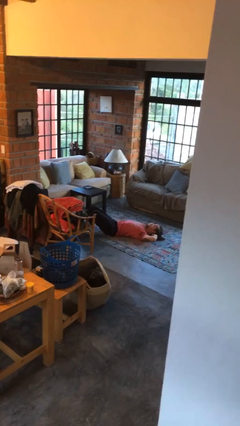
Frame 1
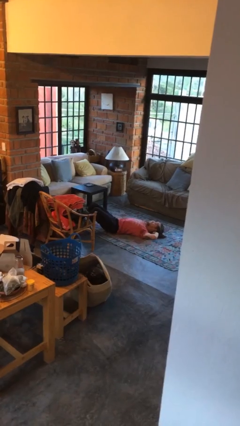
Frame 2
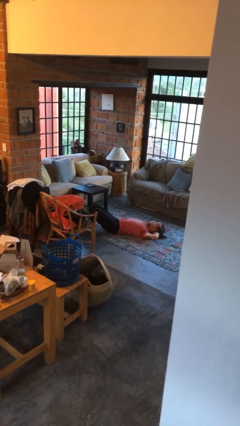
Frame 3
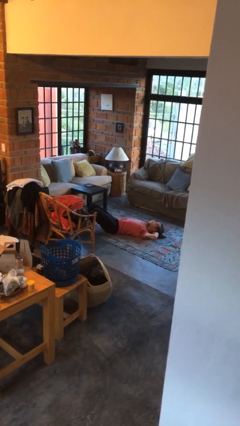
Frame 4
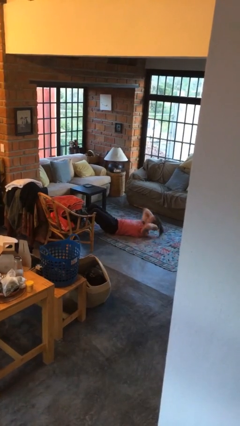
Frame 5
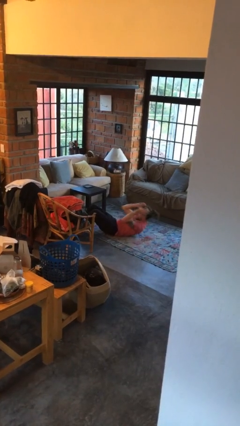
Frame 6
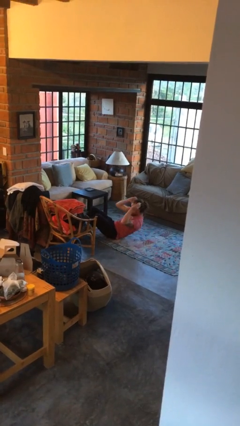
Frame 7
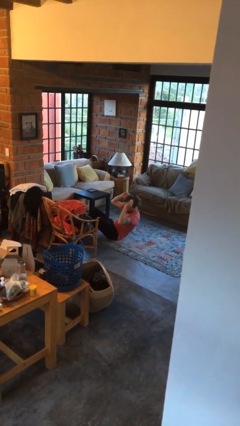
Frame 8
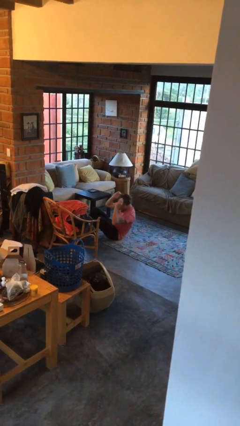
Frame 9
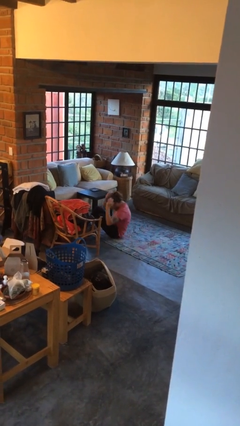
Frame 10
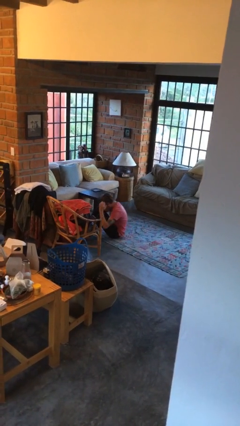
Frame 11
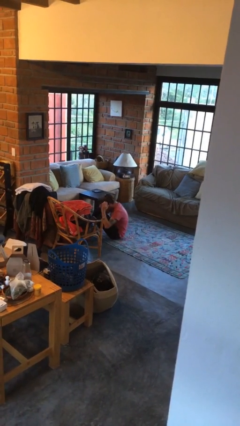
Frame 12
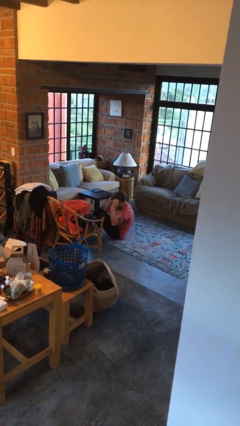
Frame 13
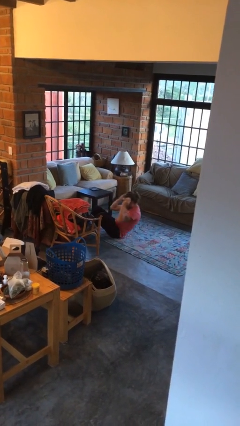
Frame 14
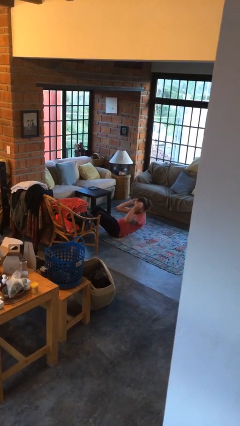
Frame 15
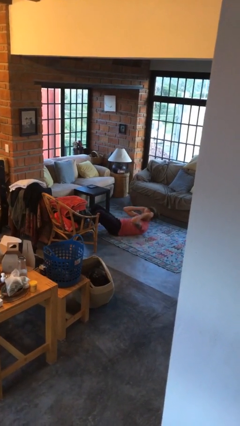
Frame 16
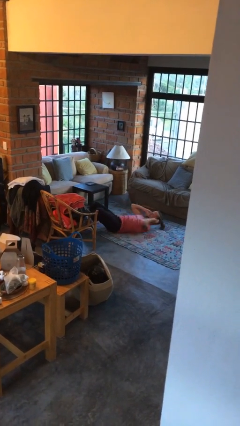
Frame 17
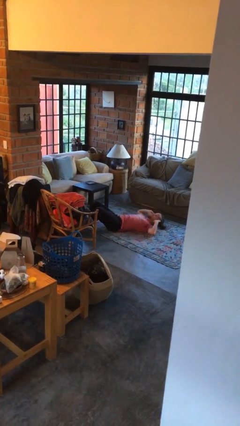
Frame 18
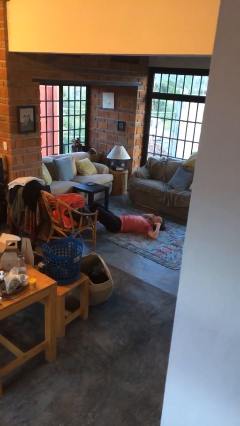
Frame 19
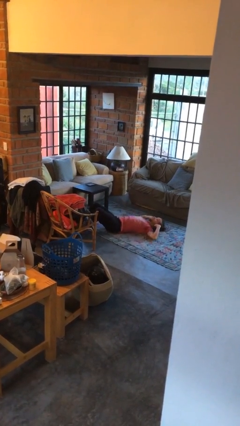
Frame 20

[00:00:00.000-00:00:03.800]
person exercises with situp

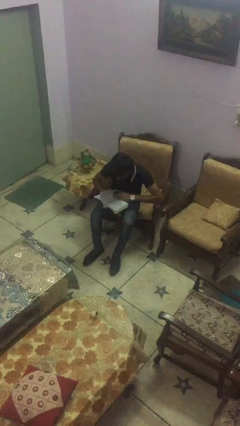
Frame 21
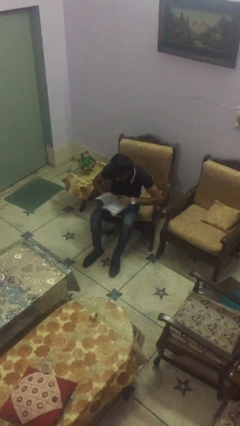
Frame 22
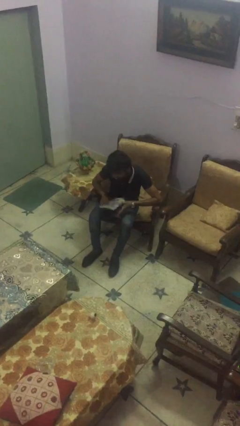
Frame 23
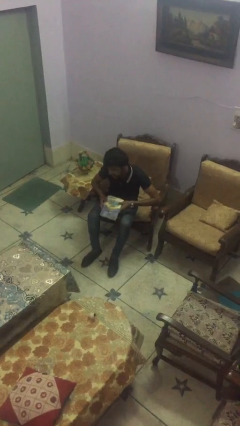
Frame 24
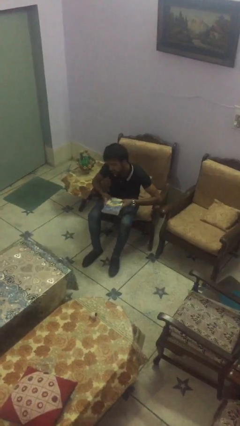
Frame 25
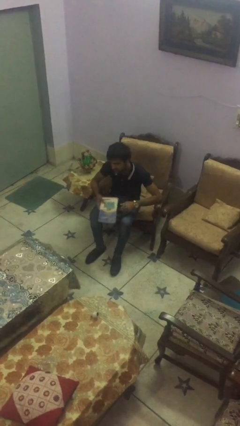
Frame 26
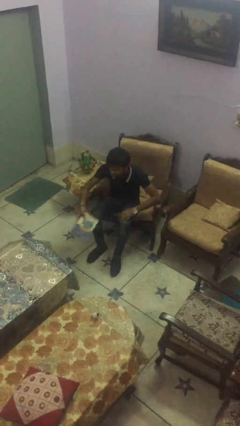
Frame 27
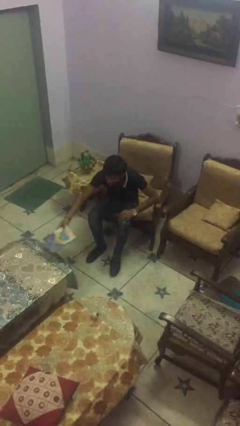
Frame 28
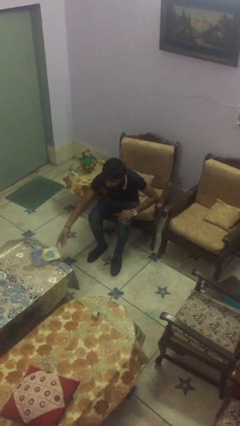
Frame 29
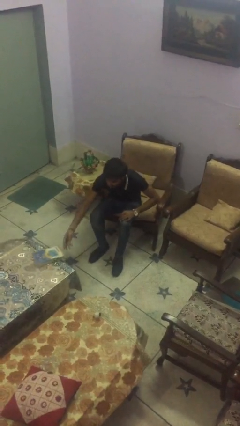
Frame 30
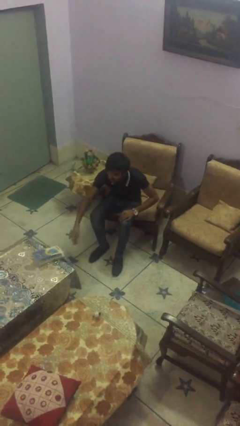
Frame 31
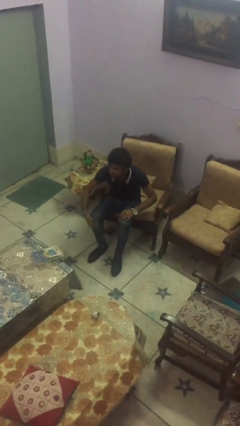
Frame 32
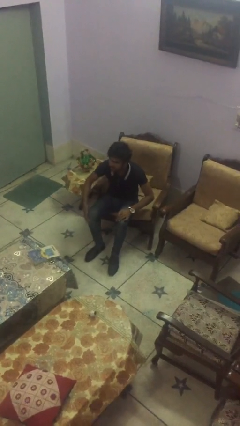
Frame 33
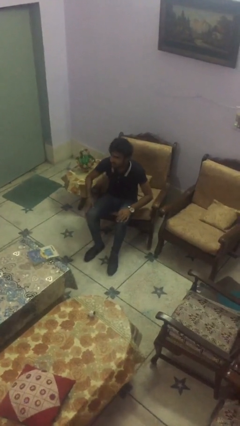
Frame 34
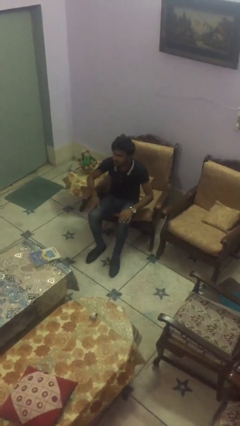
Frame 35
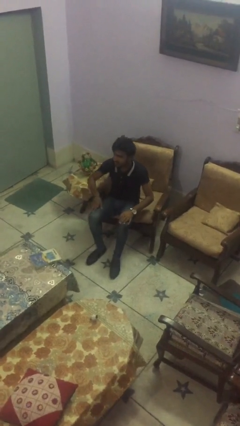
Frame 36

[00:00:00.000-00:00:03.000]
person puts down object on table

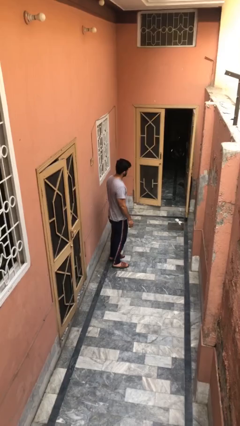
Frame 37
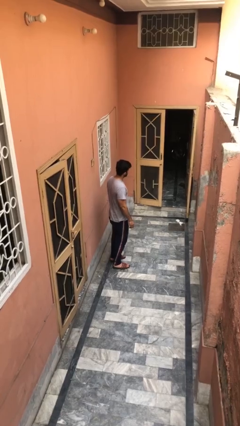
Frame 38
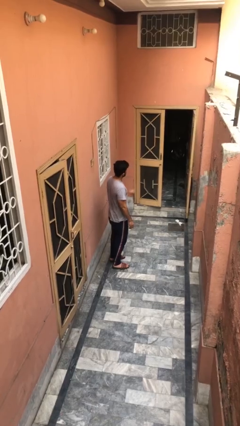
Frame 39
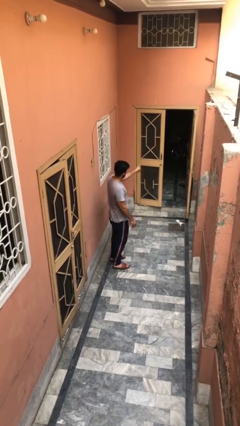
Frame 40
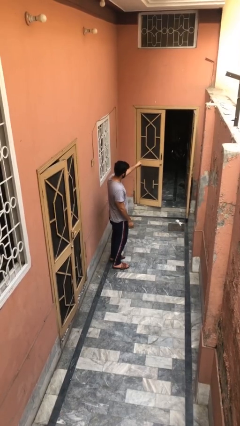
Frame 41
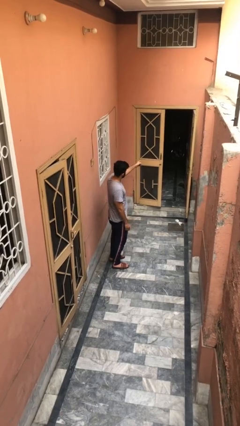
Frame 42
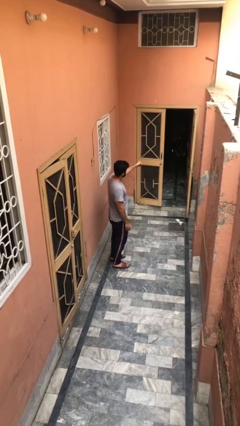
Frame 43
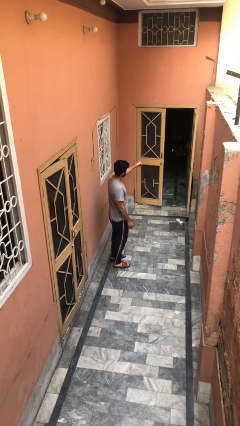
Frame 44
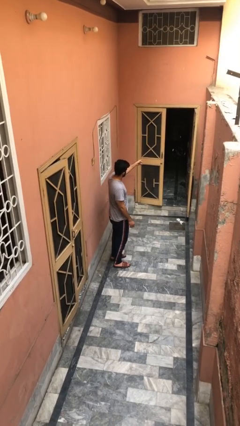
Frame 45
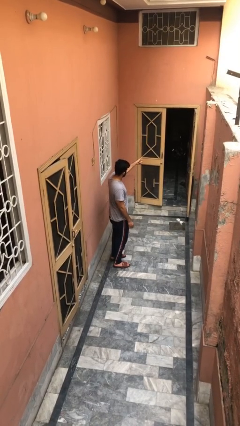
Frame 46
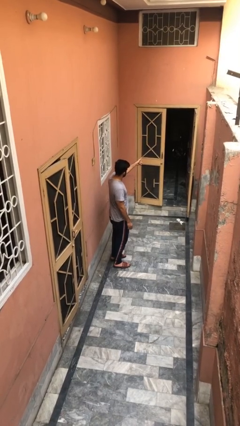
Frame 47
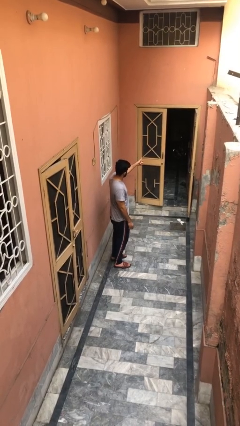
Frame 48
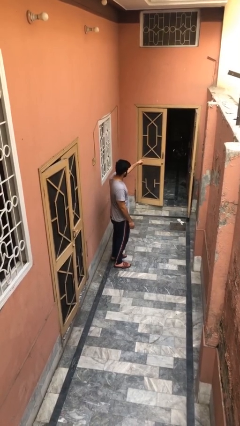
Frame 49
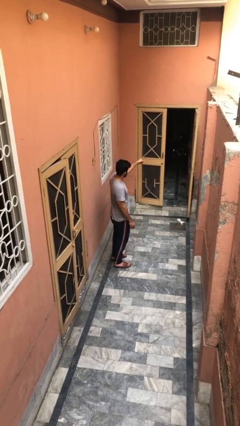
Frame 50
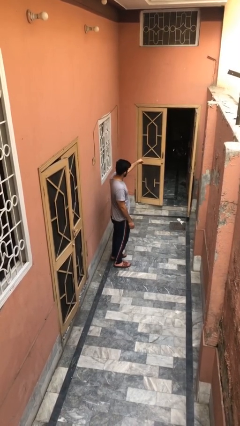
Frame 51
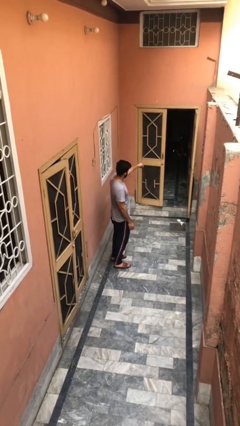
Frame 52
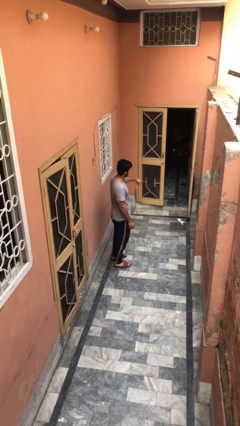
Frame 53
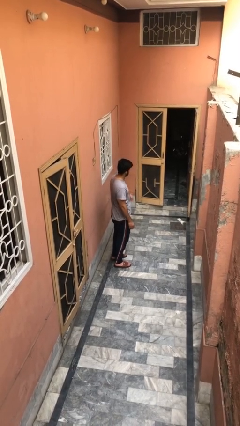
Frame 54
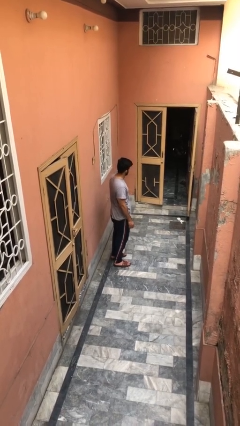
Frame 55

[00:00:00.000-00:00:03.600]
person points at person

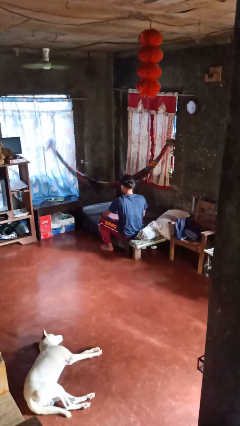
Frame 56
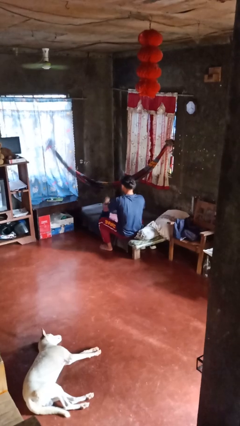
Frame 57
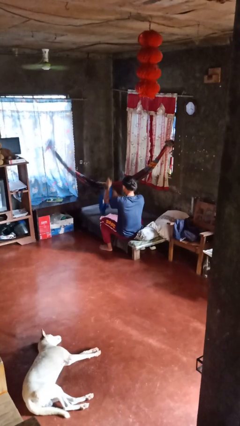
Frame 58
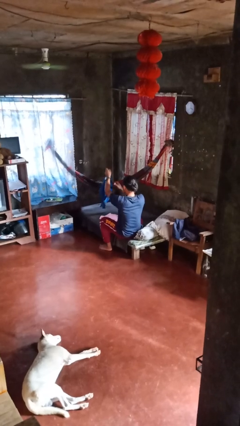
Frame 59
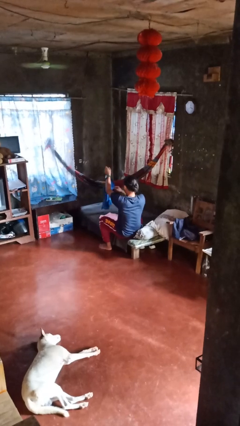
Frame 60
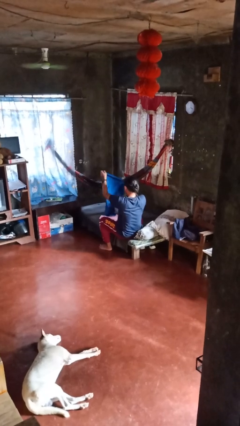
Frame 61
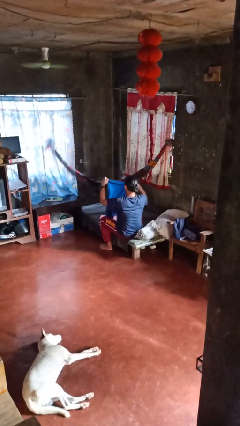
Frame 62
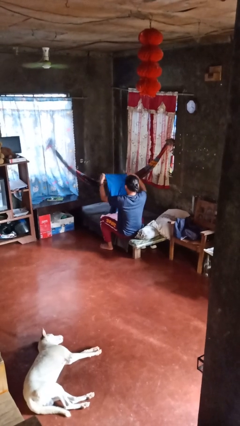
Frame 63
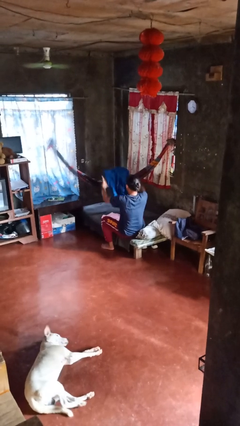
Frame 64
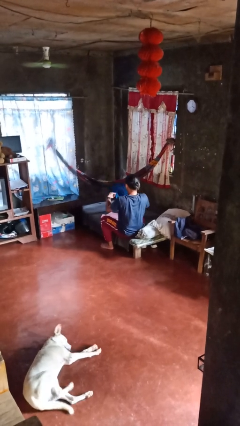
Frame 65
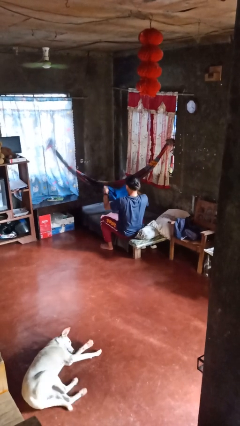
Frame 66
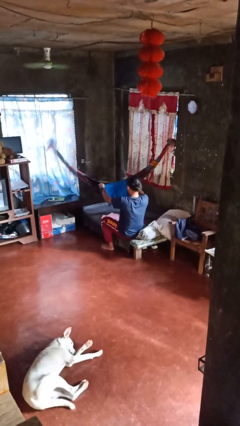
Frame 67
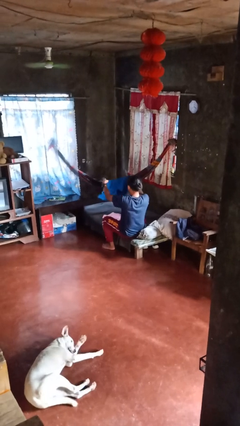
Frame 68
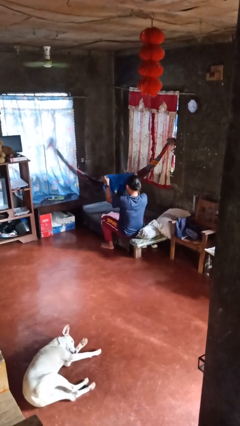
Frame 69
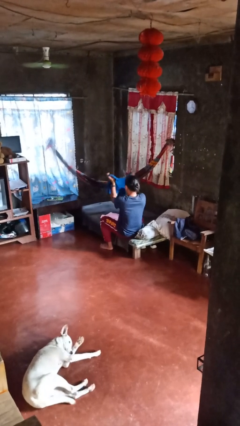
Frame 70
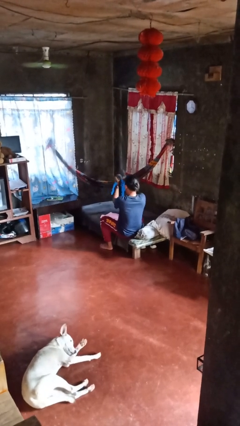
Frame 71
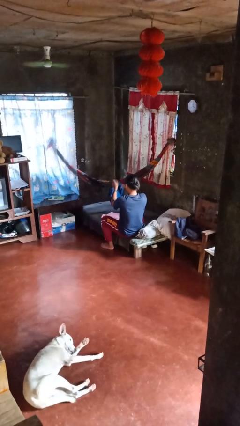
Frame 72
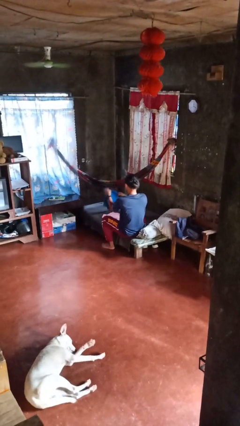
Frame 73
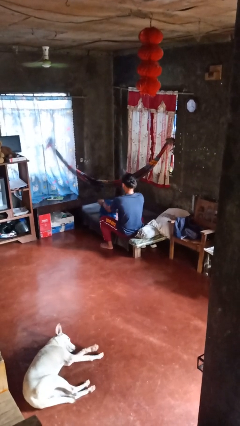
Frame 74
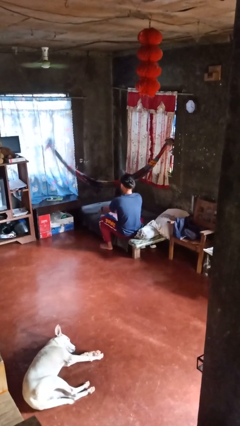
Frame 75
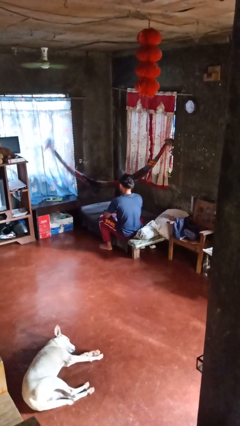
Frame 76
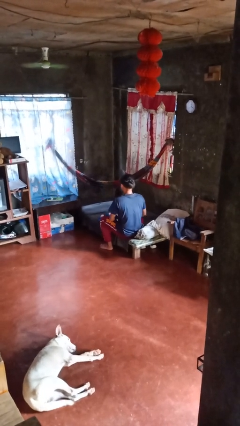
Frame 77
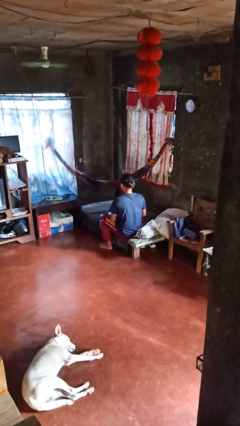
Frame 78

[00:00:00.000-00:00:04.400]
person folds shirt

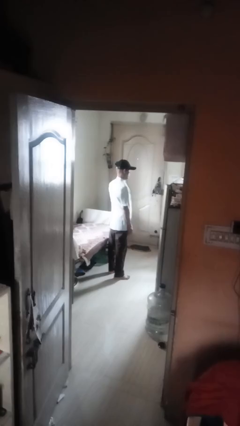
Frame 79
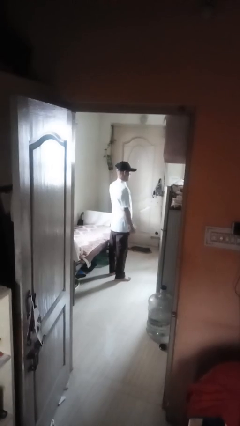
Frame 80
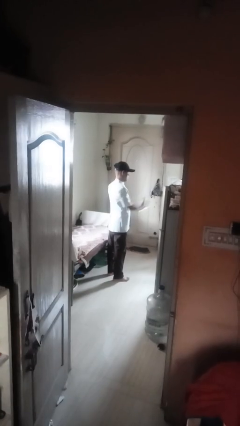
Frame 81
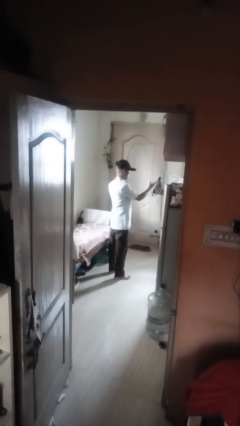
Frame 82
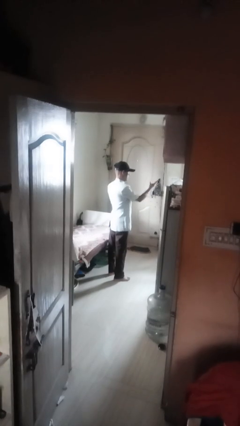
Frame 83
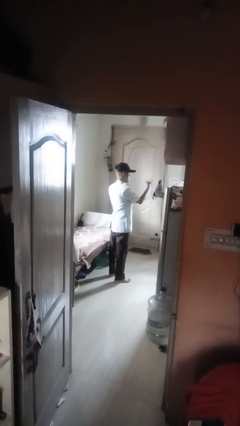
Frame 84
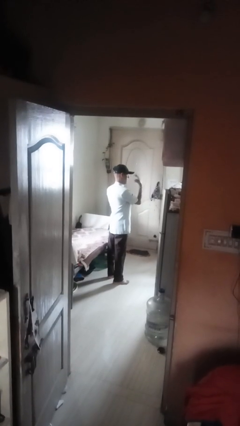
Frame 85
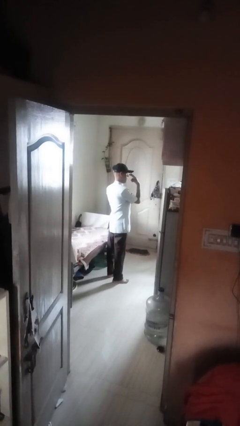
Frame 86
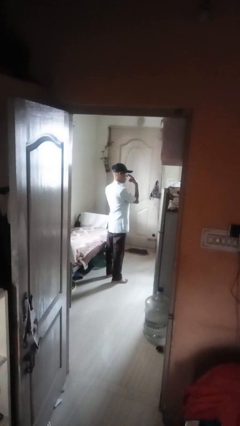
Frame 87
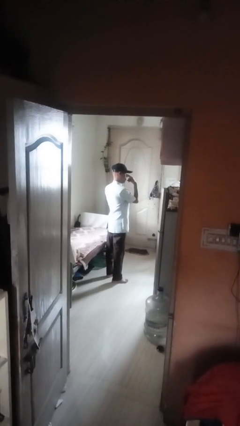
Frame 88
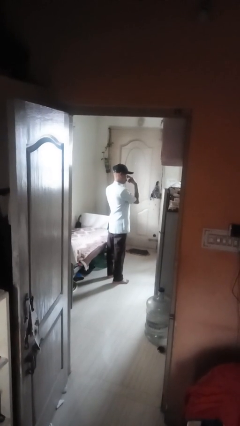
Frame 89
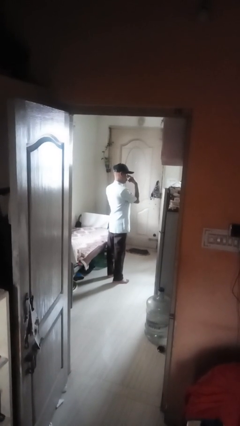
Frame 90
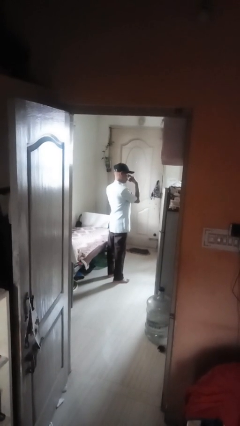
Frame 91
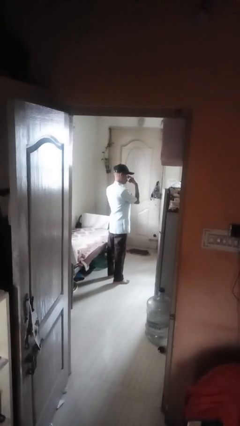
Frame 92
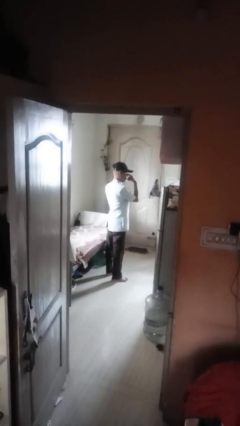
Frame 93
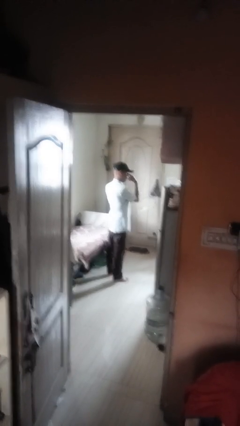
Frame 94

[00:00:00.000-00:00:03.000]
person gestures watch closely
